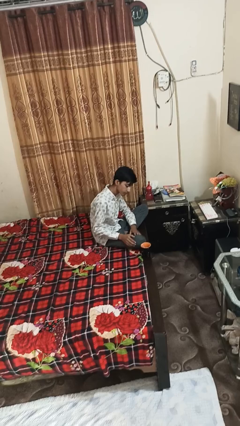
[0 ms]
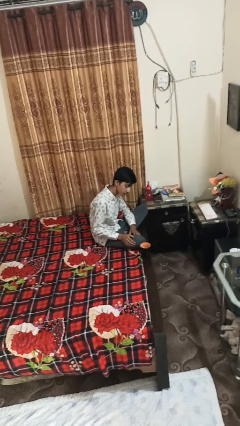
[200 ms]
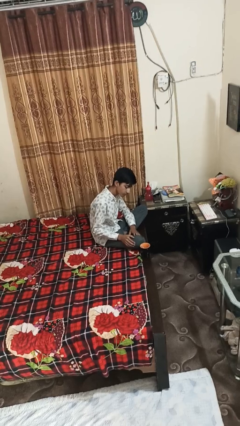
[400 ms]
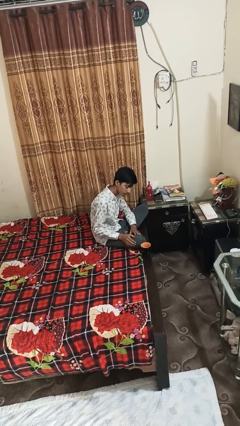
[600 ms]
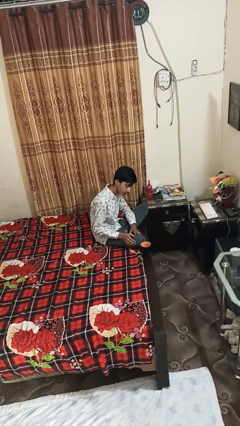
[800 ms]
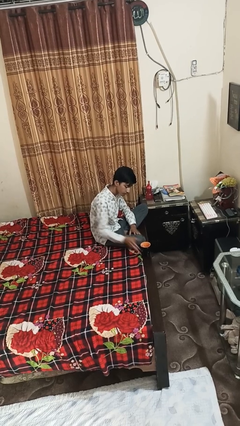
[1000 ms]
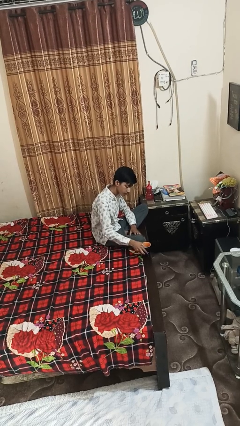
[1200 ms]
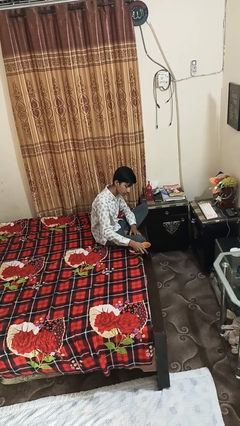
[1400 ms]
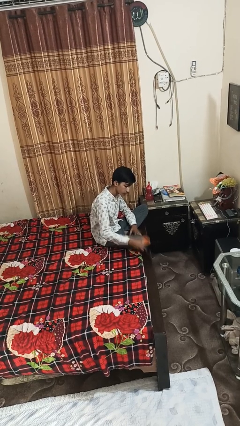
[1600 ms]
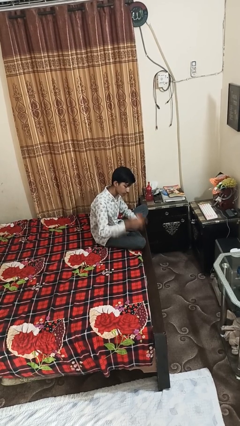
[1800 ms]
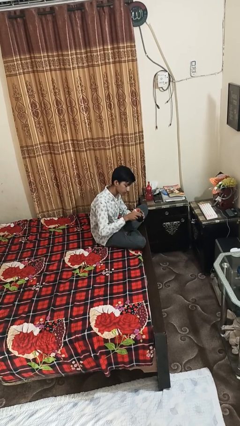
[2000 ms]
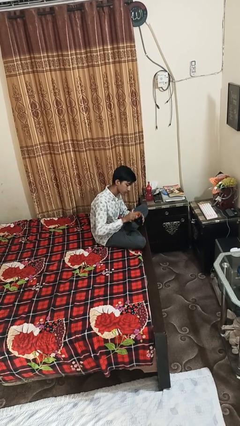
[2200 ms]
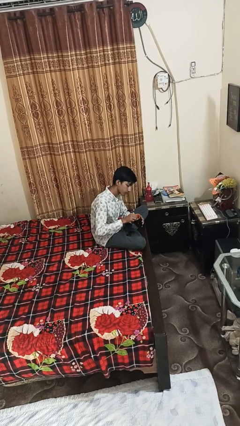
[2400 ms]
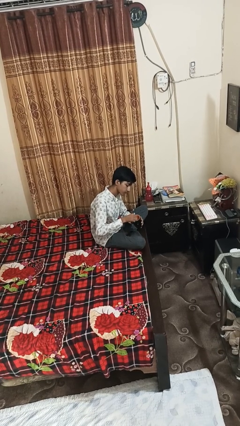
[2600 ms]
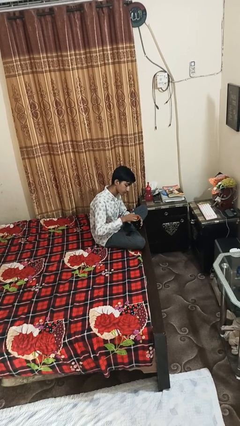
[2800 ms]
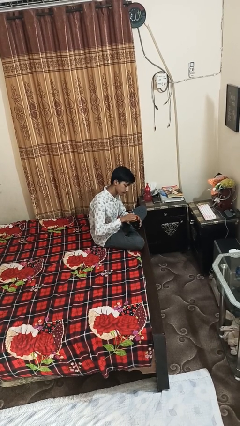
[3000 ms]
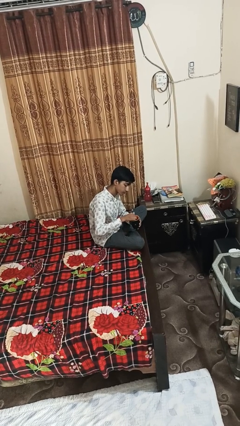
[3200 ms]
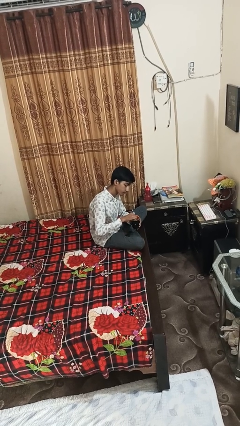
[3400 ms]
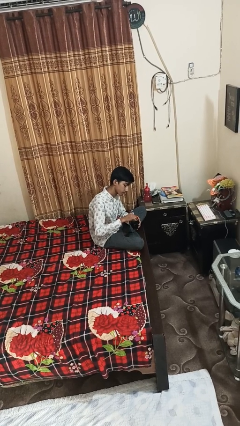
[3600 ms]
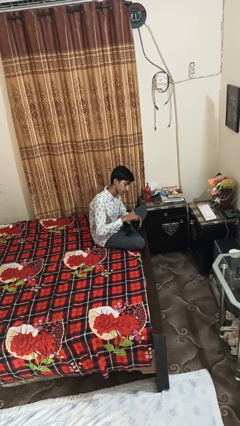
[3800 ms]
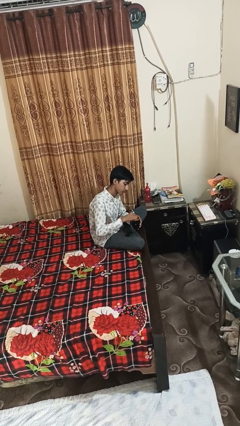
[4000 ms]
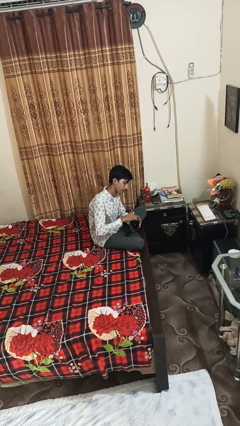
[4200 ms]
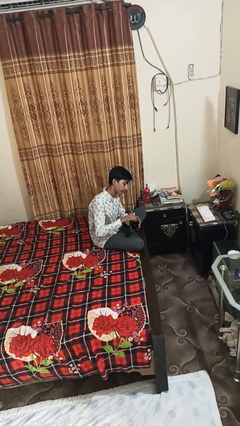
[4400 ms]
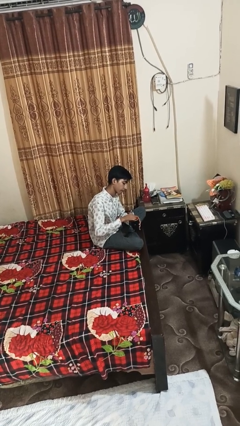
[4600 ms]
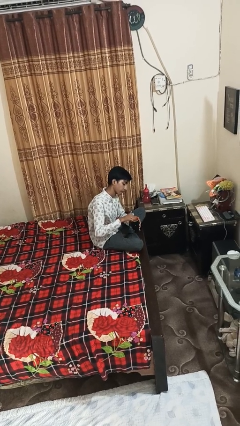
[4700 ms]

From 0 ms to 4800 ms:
person stirs mug

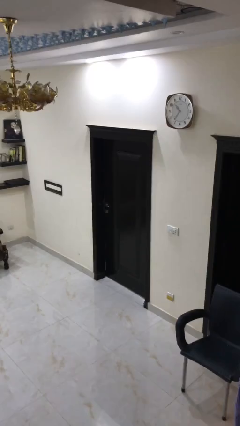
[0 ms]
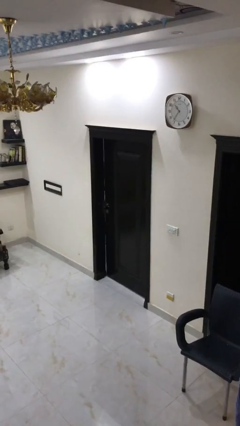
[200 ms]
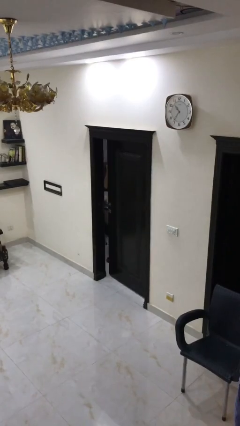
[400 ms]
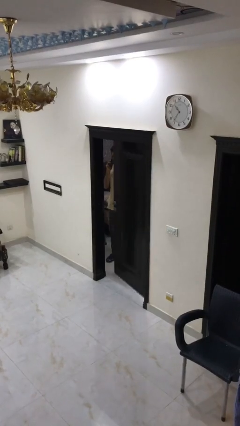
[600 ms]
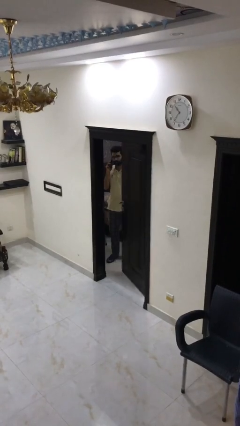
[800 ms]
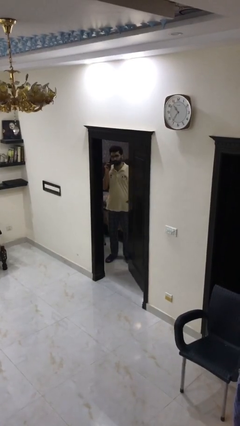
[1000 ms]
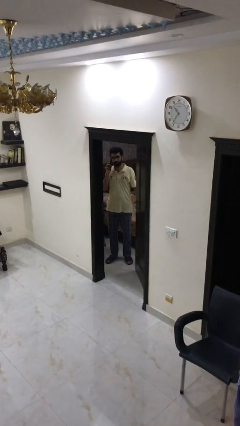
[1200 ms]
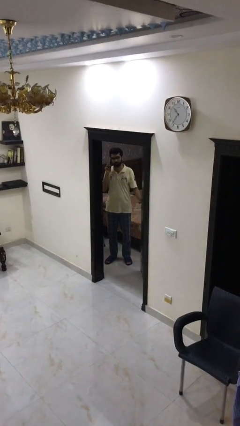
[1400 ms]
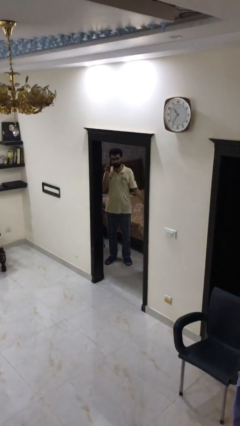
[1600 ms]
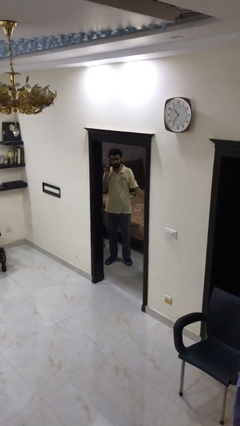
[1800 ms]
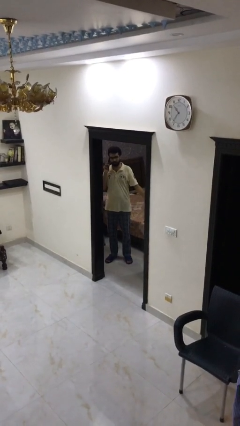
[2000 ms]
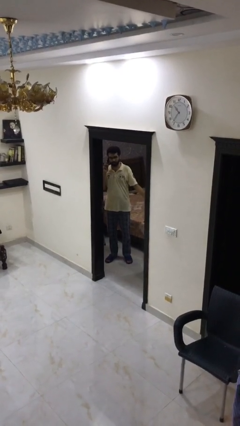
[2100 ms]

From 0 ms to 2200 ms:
person opens facility door

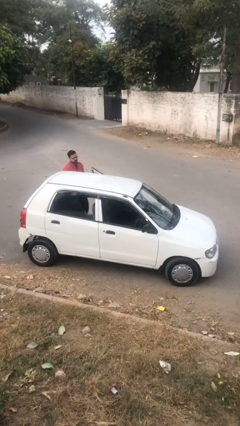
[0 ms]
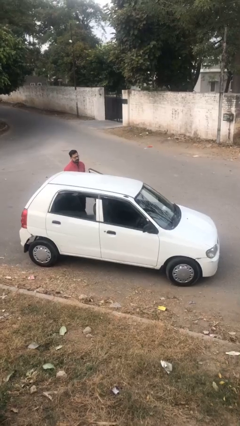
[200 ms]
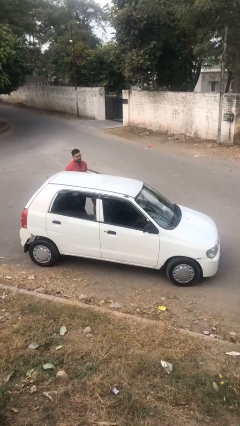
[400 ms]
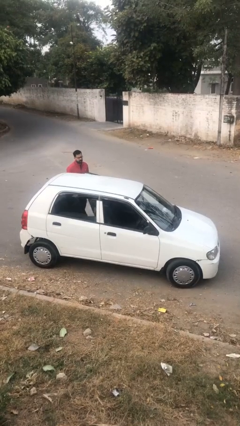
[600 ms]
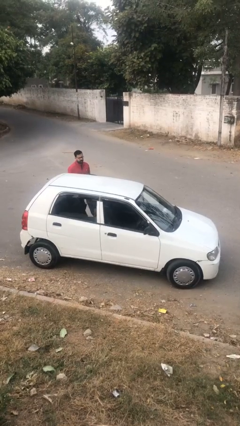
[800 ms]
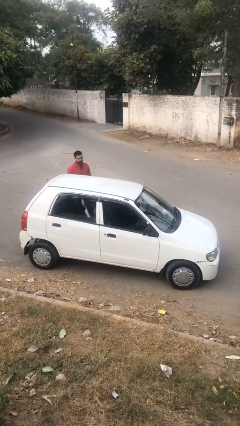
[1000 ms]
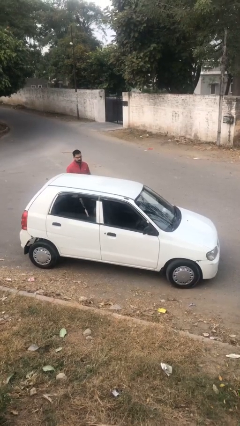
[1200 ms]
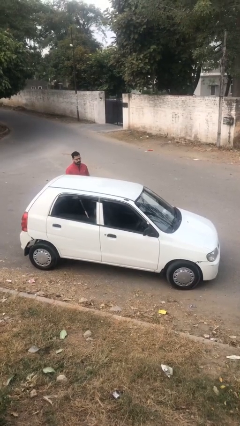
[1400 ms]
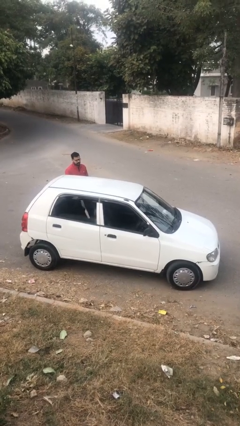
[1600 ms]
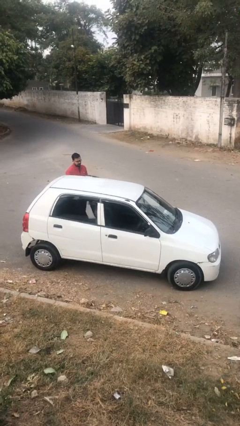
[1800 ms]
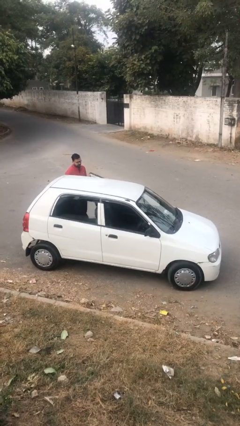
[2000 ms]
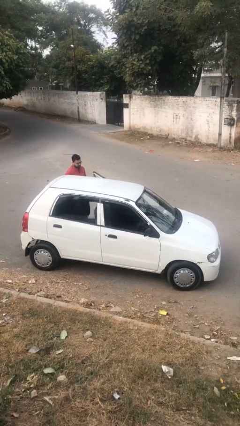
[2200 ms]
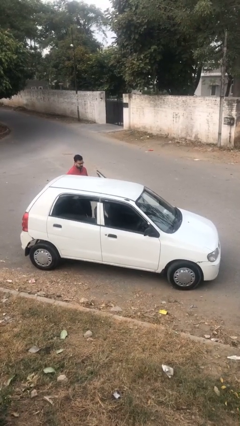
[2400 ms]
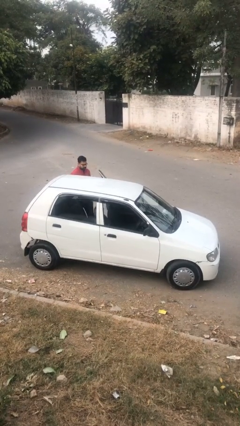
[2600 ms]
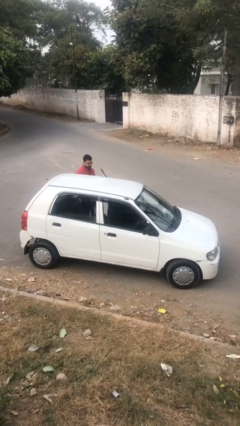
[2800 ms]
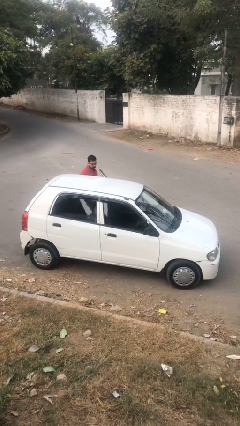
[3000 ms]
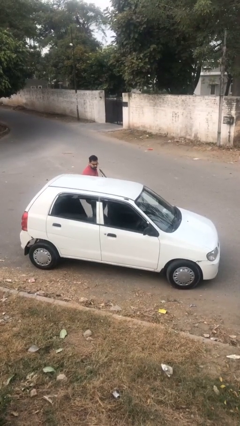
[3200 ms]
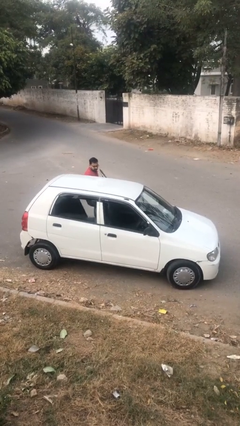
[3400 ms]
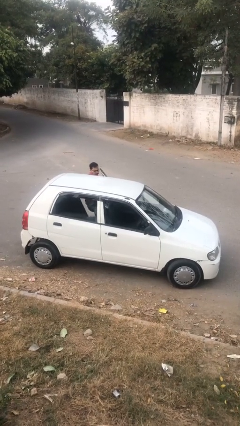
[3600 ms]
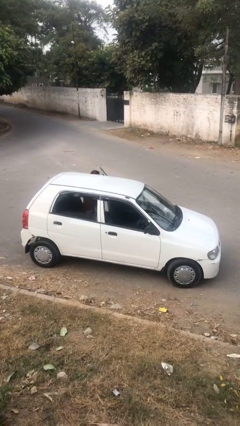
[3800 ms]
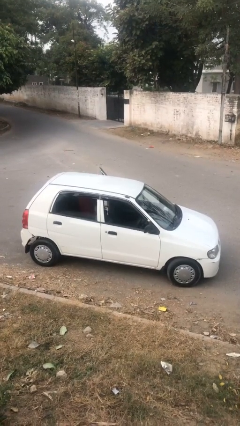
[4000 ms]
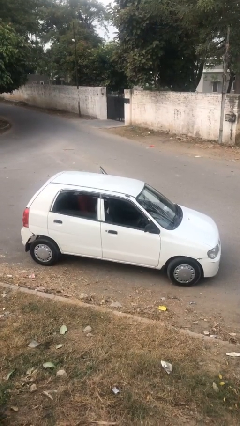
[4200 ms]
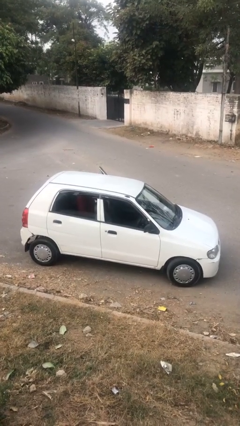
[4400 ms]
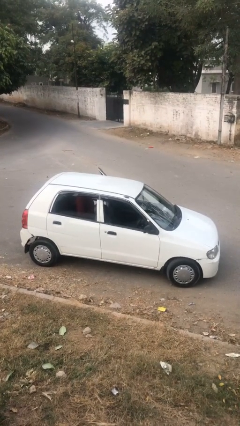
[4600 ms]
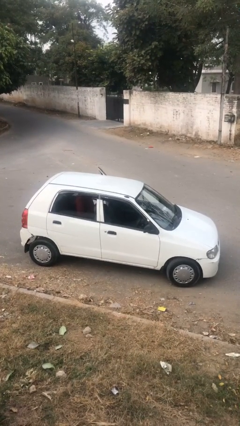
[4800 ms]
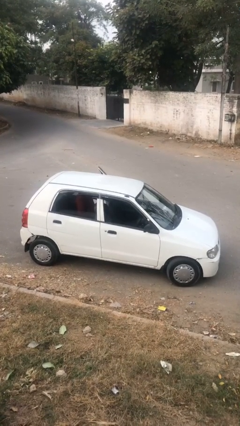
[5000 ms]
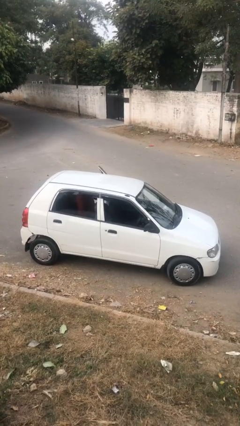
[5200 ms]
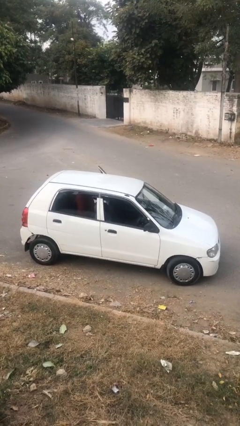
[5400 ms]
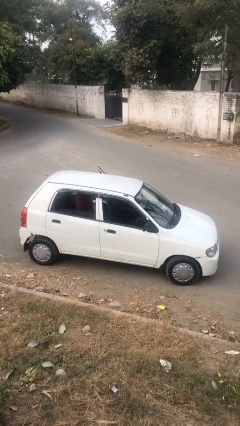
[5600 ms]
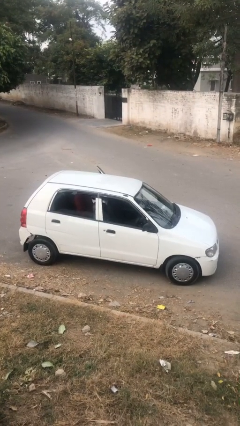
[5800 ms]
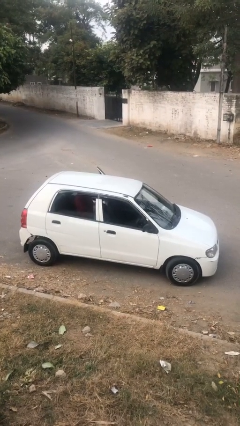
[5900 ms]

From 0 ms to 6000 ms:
car picks up person

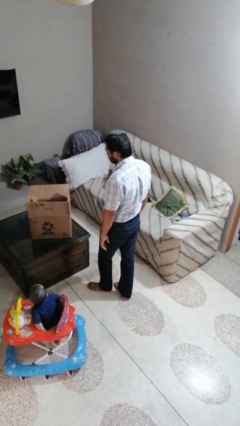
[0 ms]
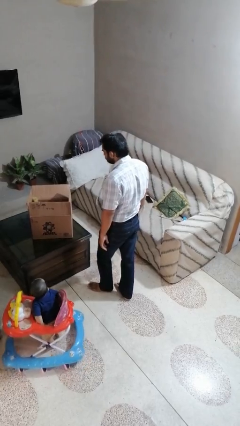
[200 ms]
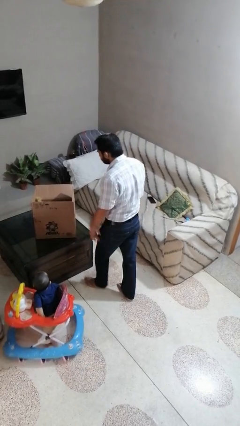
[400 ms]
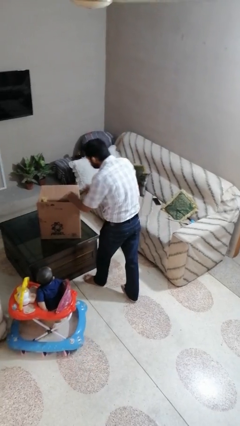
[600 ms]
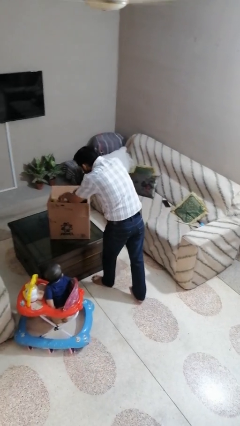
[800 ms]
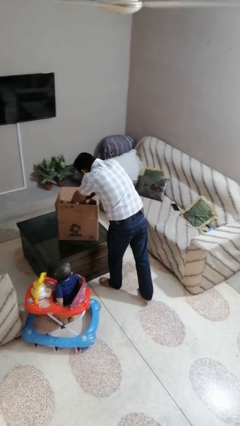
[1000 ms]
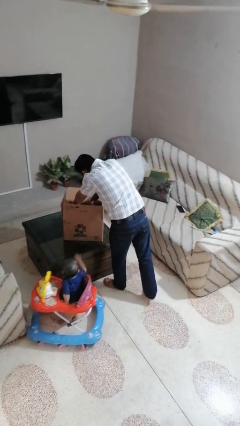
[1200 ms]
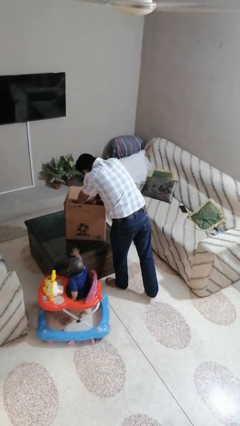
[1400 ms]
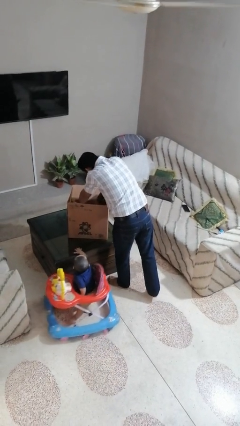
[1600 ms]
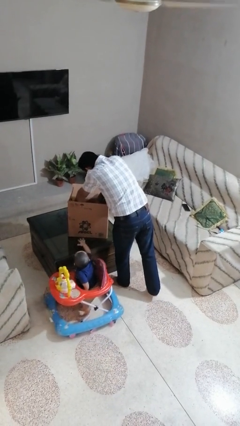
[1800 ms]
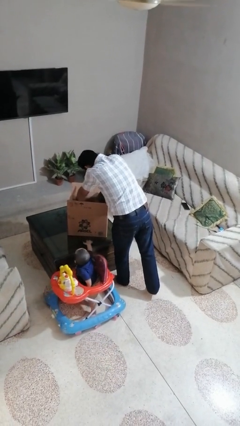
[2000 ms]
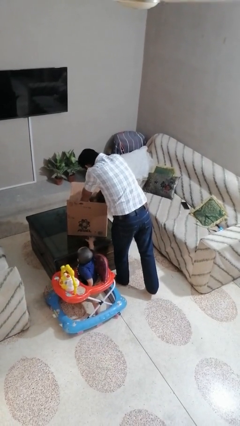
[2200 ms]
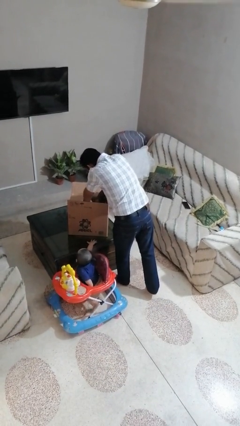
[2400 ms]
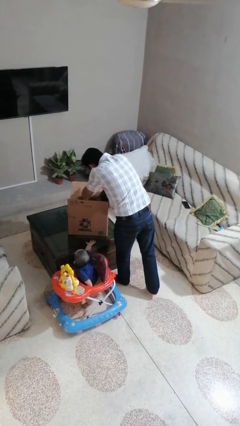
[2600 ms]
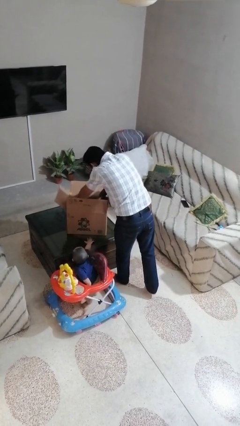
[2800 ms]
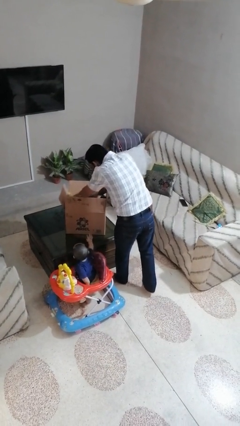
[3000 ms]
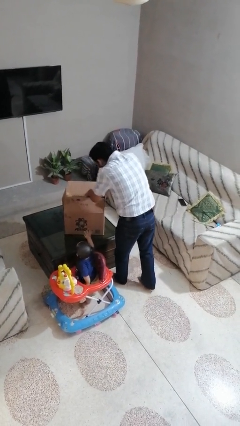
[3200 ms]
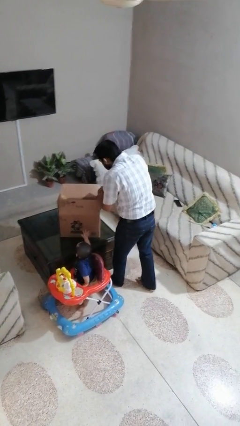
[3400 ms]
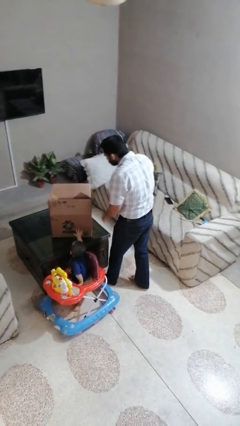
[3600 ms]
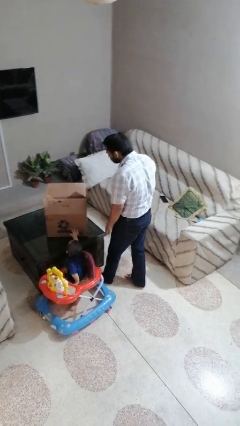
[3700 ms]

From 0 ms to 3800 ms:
person searches in box

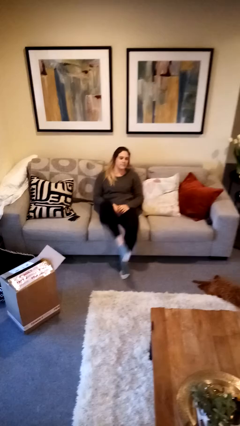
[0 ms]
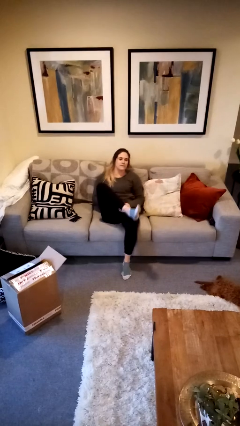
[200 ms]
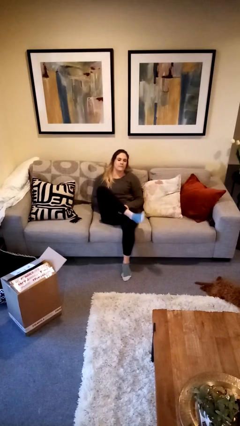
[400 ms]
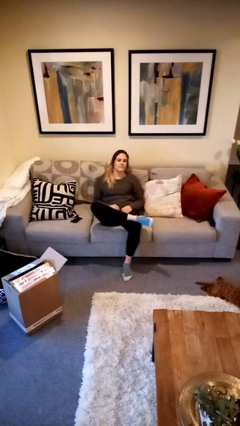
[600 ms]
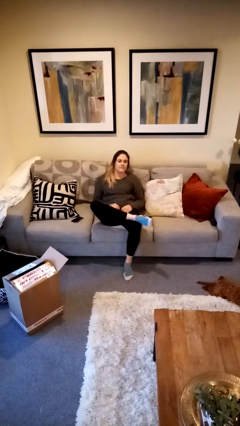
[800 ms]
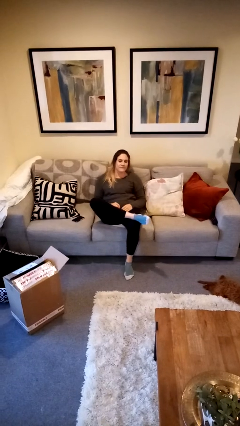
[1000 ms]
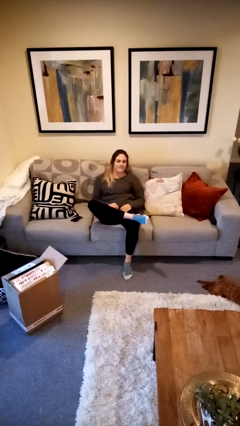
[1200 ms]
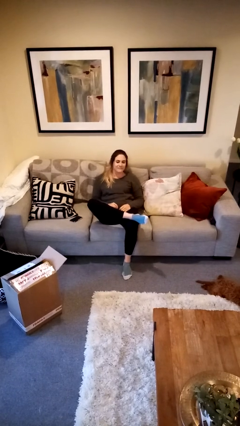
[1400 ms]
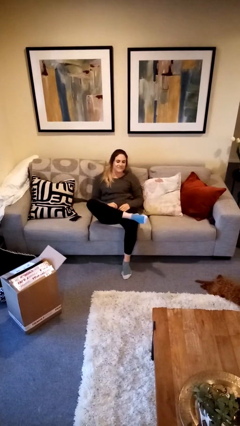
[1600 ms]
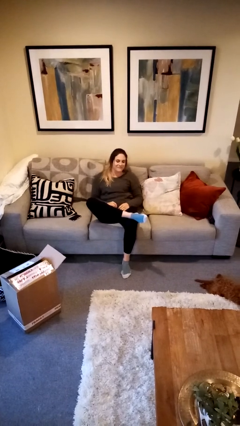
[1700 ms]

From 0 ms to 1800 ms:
person crosses legs
